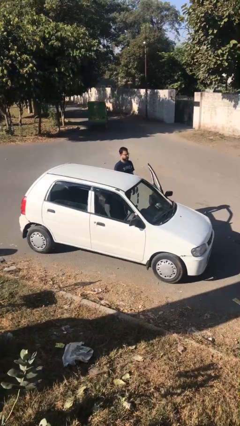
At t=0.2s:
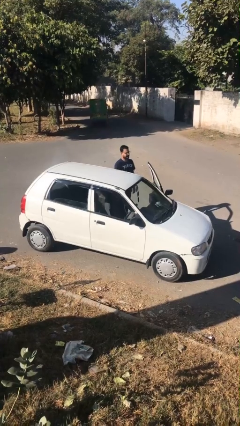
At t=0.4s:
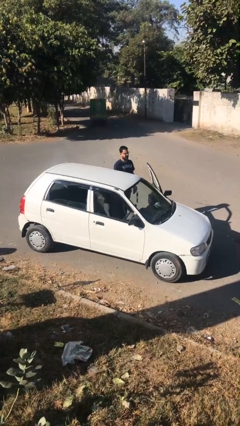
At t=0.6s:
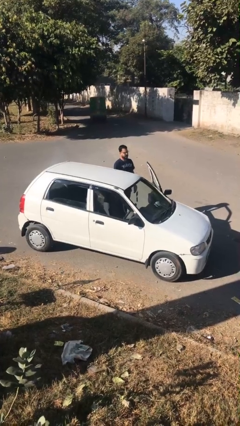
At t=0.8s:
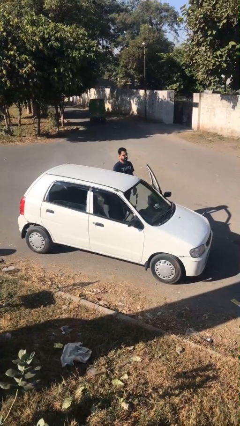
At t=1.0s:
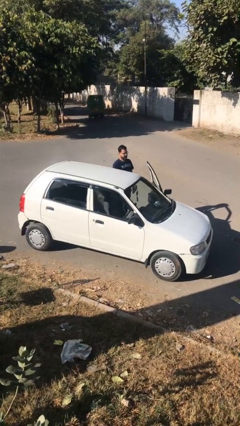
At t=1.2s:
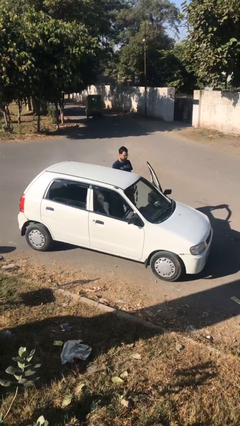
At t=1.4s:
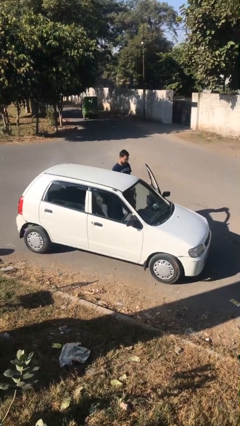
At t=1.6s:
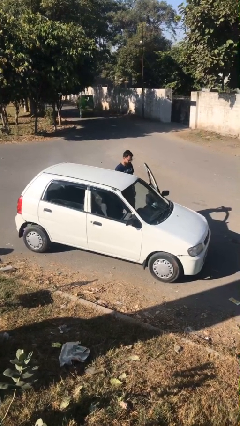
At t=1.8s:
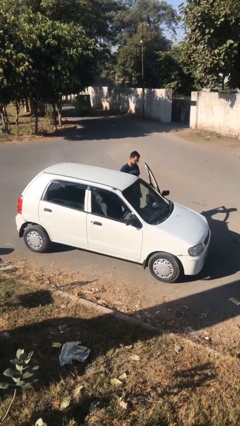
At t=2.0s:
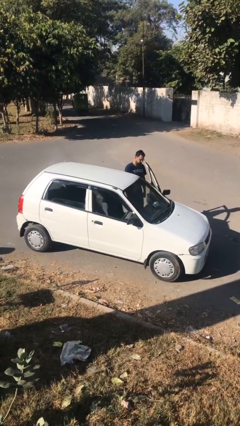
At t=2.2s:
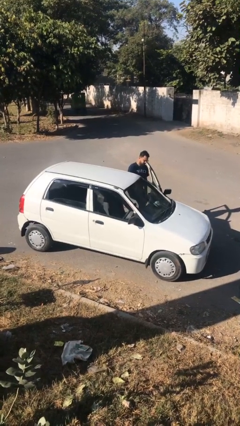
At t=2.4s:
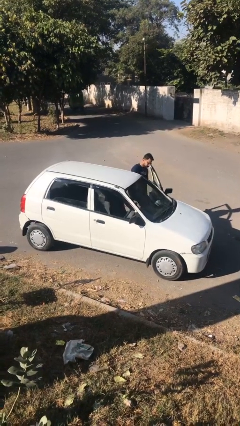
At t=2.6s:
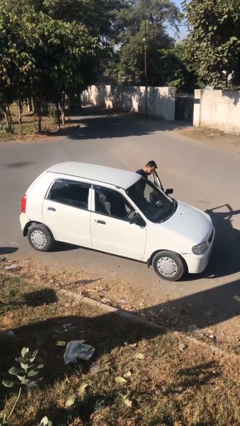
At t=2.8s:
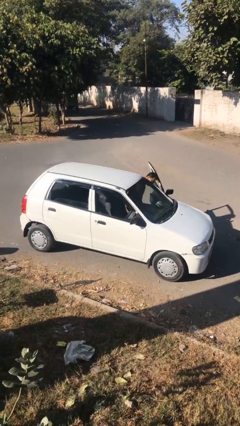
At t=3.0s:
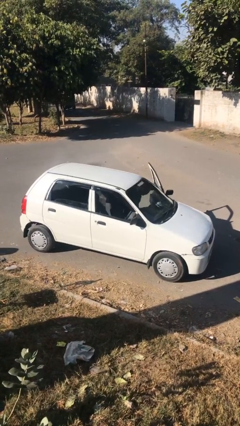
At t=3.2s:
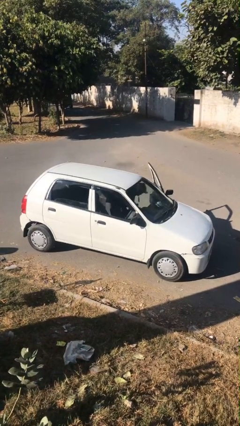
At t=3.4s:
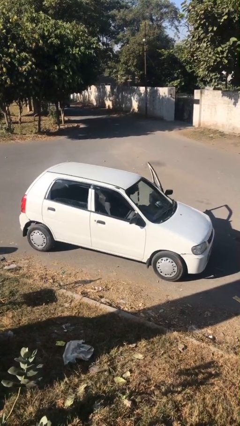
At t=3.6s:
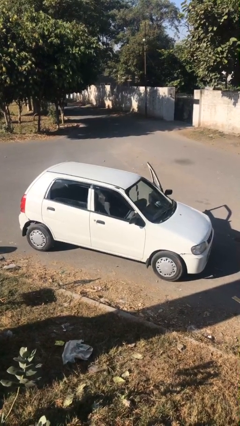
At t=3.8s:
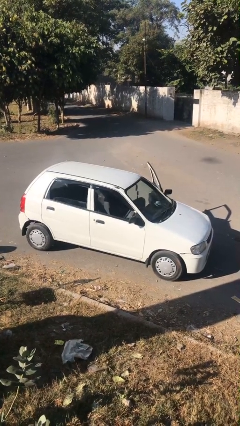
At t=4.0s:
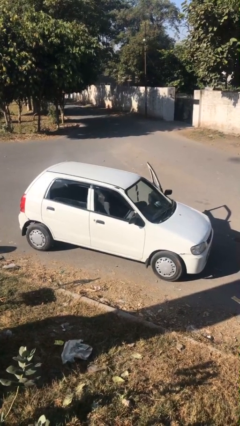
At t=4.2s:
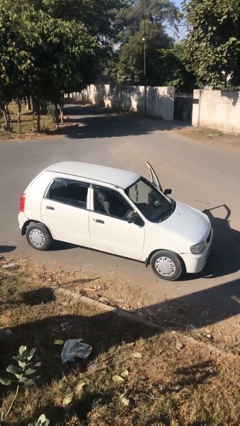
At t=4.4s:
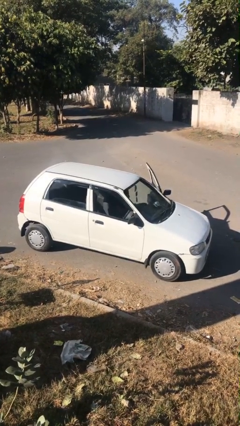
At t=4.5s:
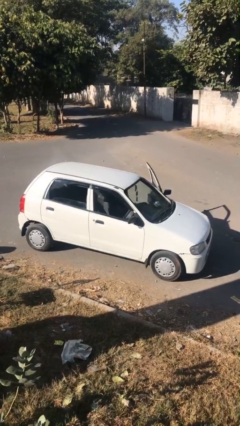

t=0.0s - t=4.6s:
car picks up person

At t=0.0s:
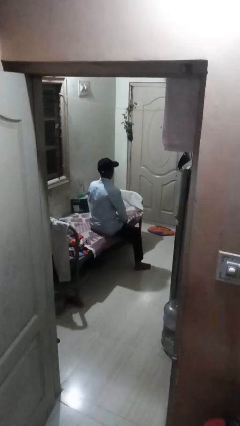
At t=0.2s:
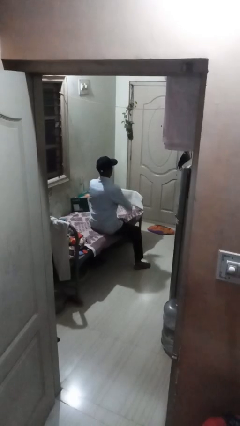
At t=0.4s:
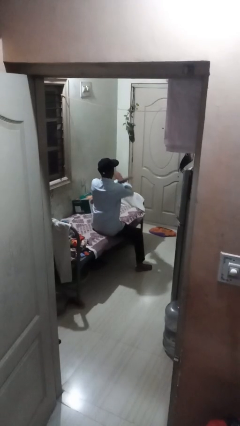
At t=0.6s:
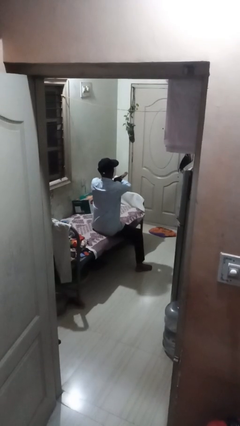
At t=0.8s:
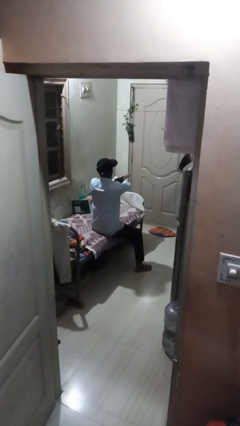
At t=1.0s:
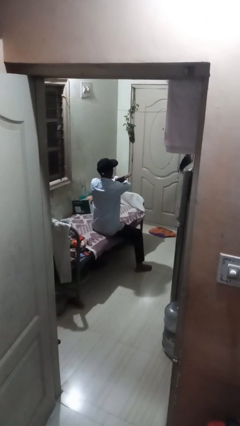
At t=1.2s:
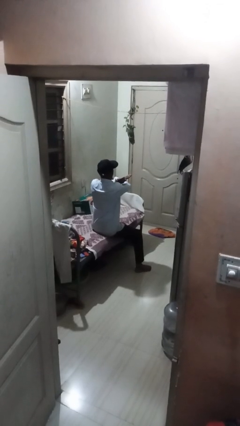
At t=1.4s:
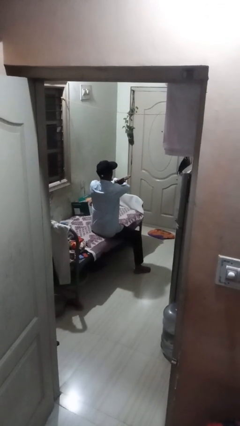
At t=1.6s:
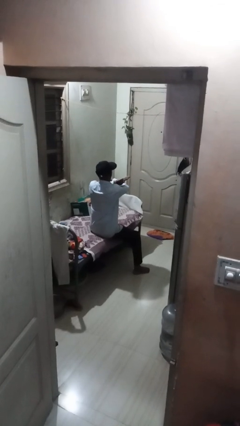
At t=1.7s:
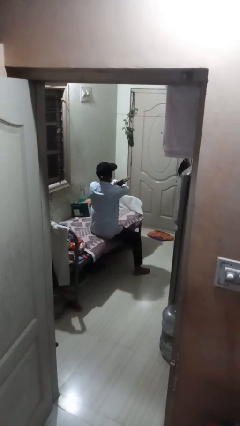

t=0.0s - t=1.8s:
person gestures arms x

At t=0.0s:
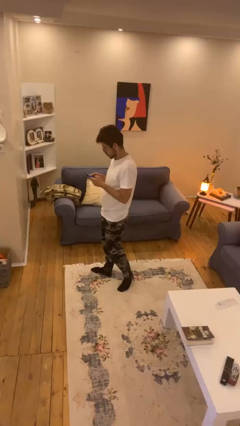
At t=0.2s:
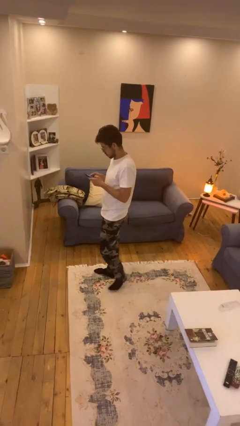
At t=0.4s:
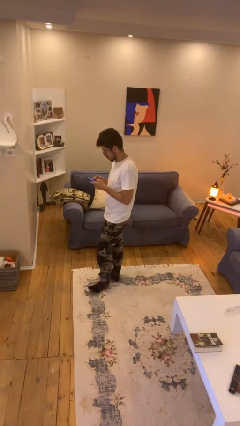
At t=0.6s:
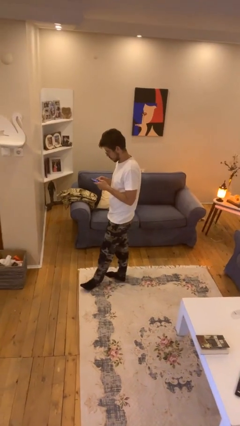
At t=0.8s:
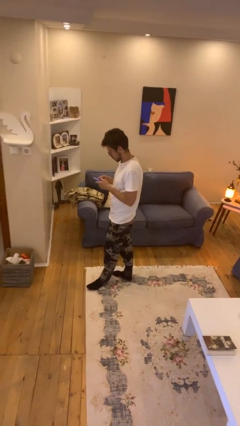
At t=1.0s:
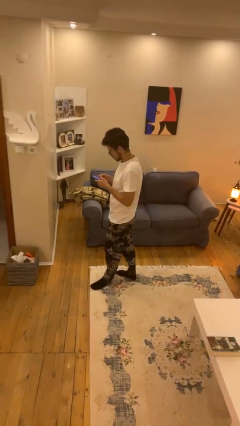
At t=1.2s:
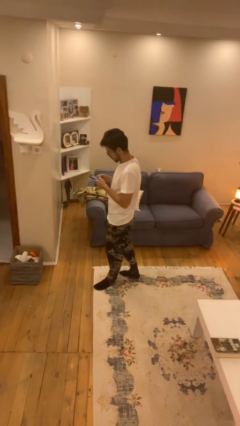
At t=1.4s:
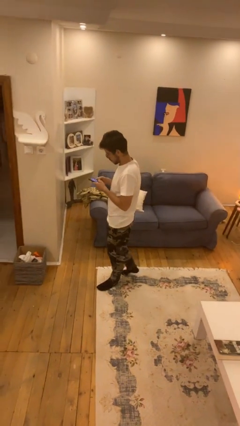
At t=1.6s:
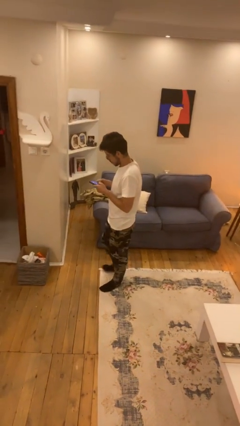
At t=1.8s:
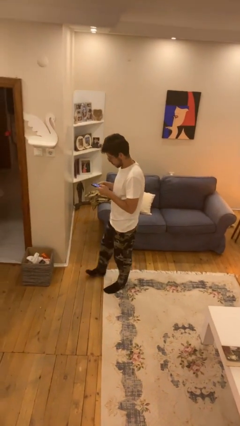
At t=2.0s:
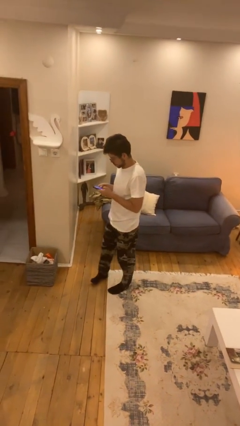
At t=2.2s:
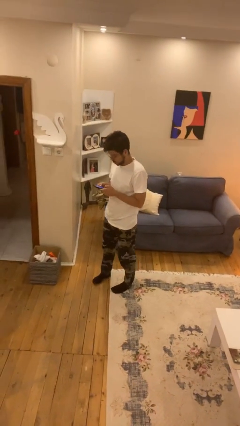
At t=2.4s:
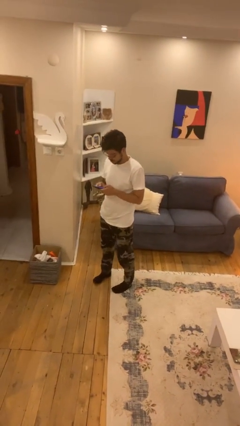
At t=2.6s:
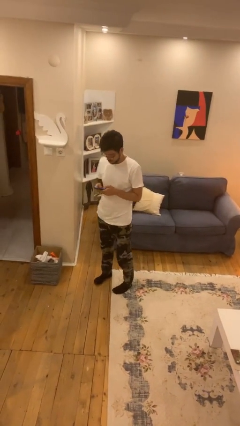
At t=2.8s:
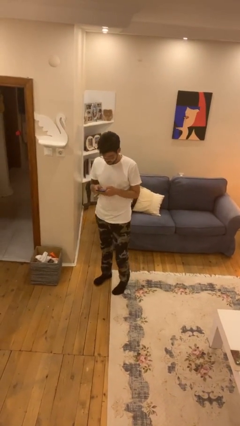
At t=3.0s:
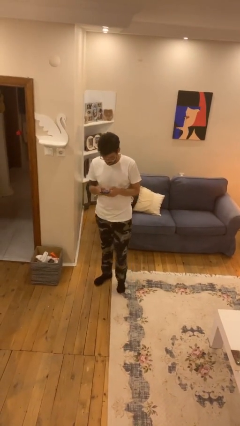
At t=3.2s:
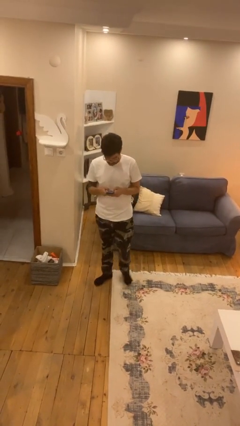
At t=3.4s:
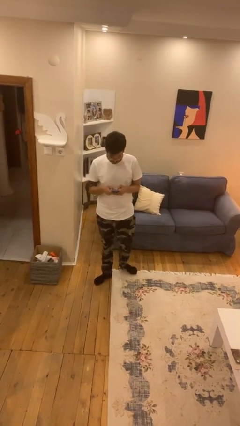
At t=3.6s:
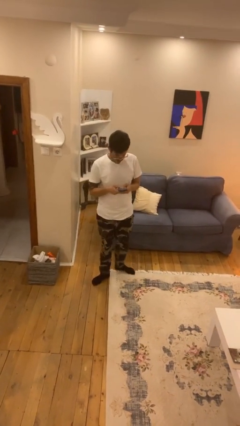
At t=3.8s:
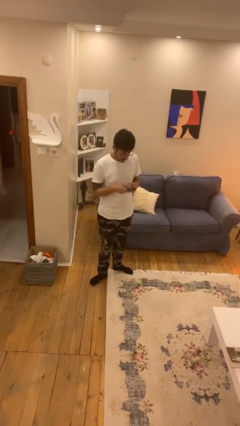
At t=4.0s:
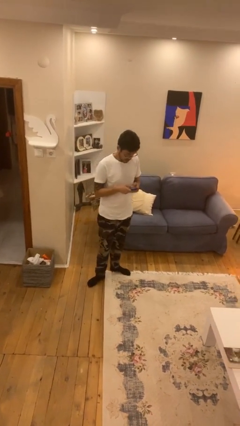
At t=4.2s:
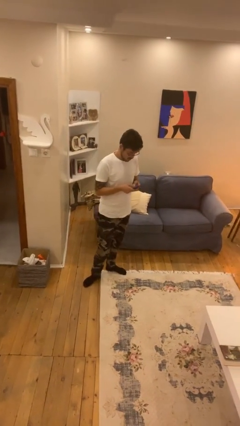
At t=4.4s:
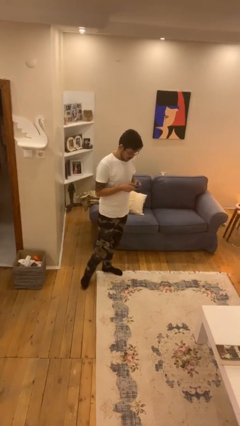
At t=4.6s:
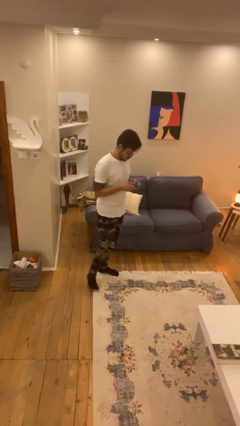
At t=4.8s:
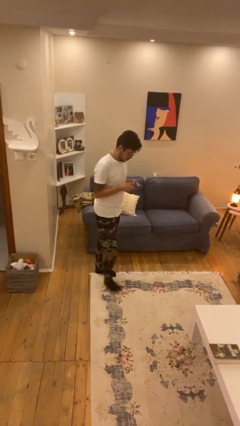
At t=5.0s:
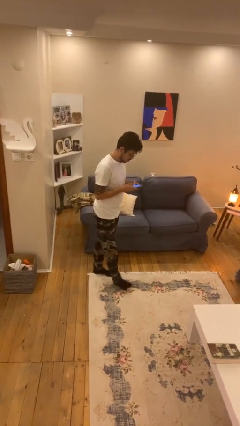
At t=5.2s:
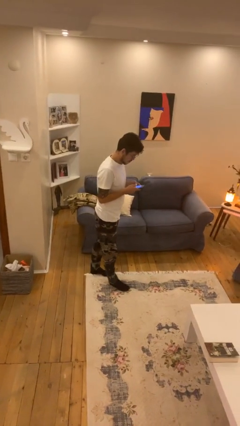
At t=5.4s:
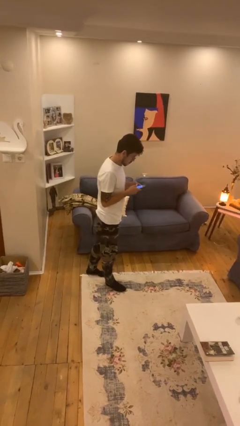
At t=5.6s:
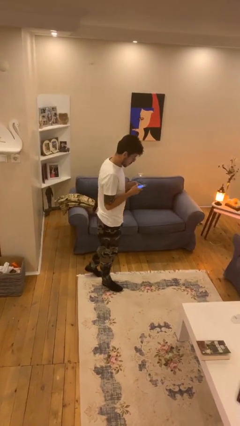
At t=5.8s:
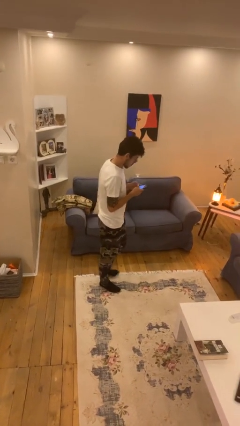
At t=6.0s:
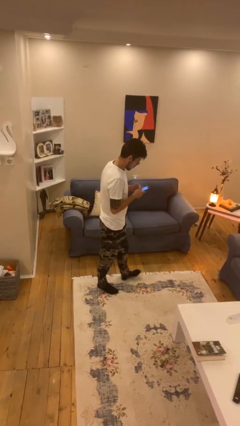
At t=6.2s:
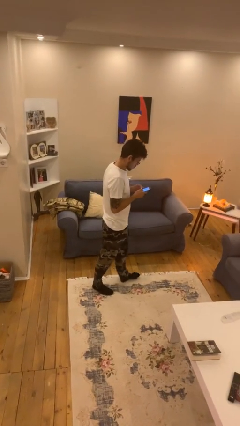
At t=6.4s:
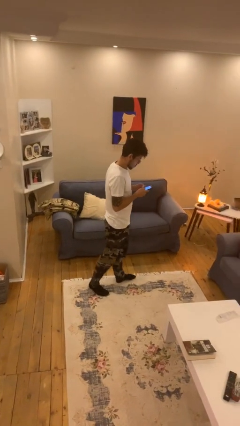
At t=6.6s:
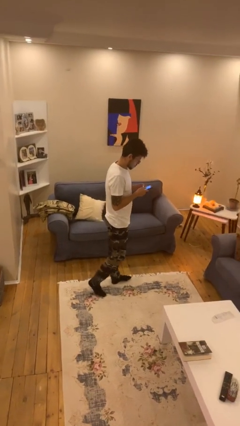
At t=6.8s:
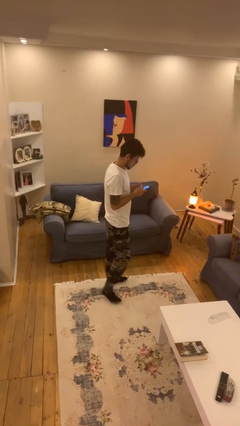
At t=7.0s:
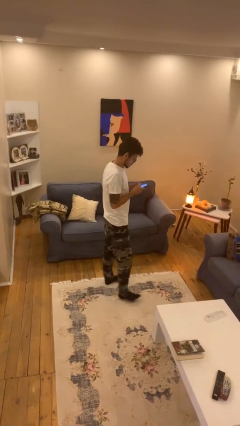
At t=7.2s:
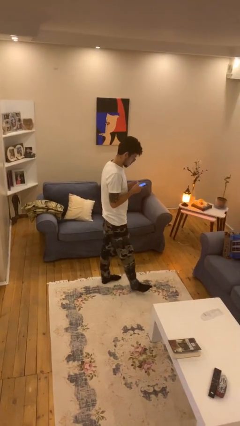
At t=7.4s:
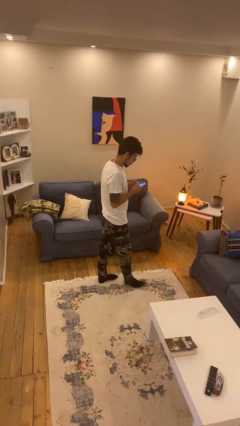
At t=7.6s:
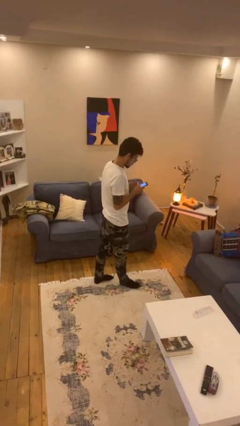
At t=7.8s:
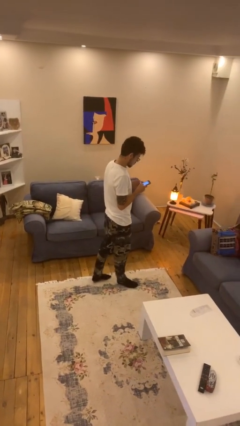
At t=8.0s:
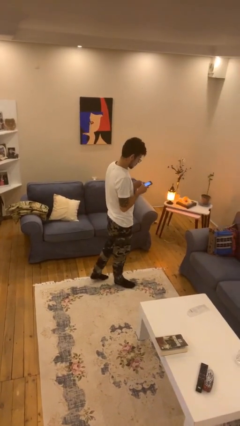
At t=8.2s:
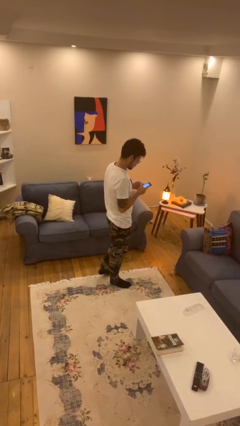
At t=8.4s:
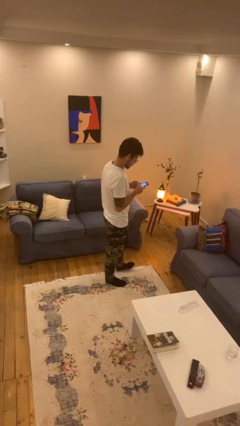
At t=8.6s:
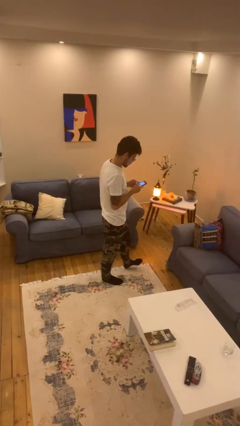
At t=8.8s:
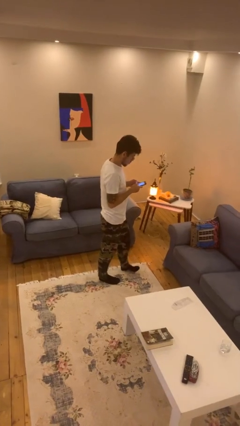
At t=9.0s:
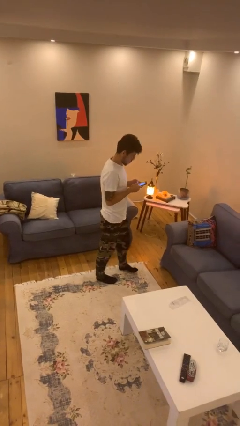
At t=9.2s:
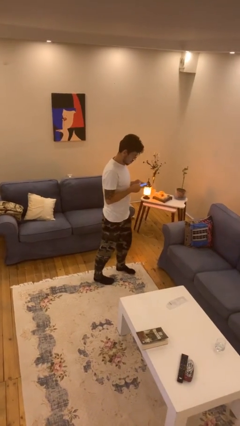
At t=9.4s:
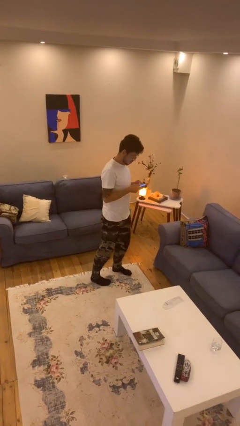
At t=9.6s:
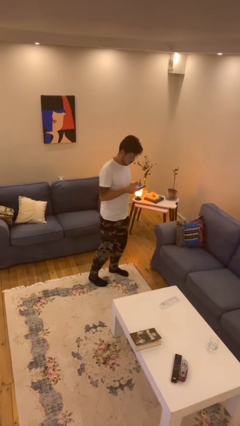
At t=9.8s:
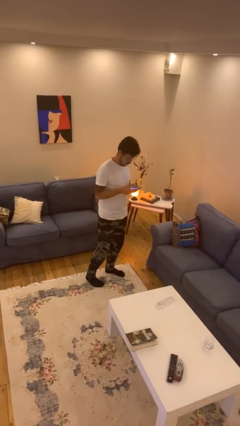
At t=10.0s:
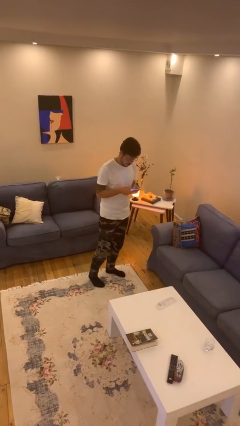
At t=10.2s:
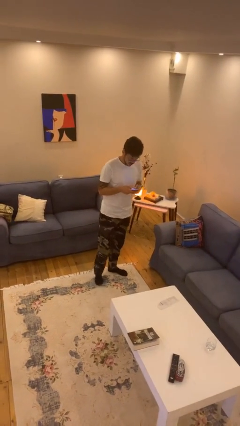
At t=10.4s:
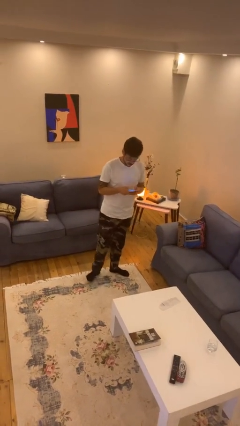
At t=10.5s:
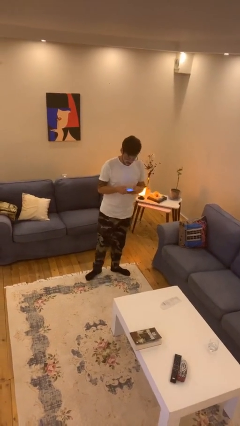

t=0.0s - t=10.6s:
person texts on phone

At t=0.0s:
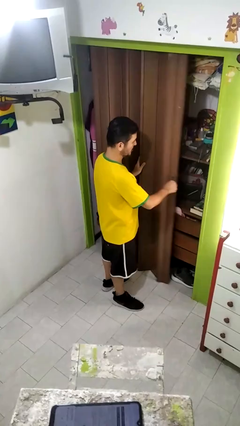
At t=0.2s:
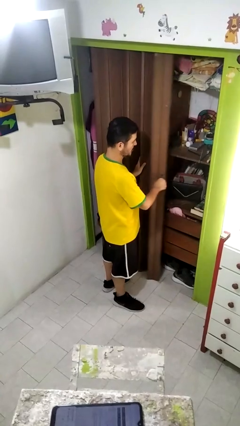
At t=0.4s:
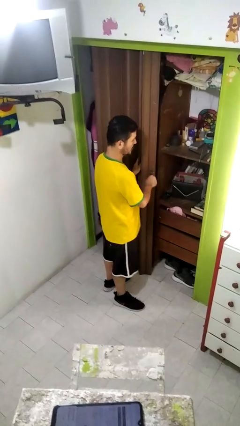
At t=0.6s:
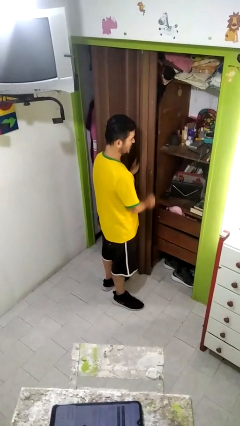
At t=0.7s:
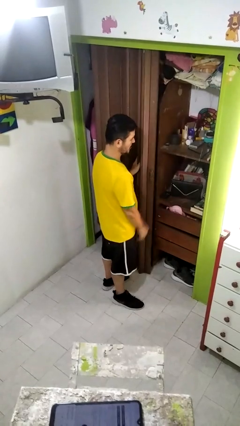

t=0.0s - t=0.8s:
person opens closet door

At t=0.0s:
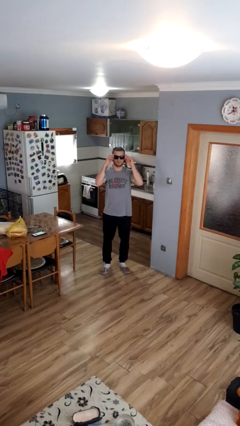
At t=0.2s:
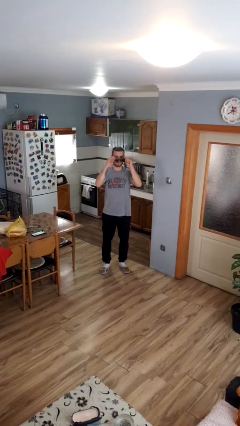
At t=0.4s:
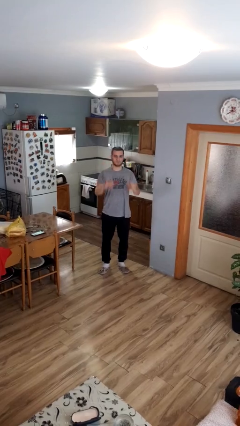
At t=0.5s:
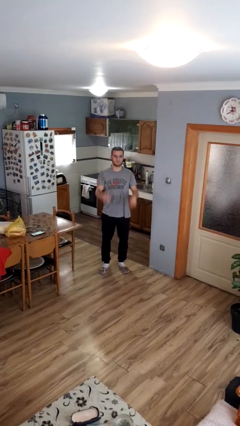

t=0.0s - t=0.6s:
person takes off sunglasses
